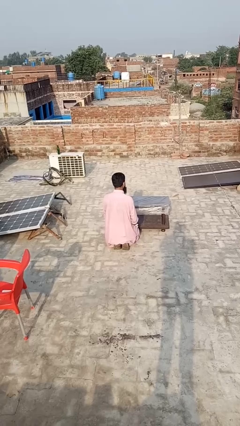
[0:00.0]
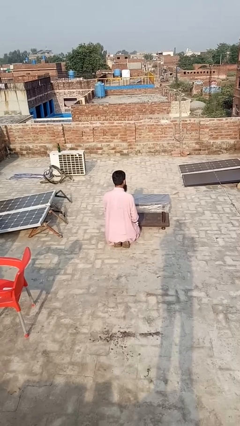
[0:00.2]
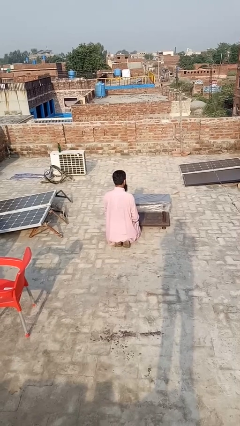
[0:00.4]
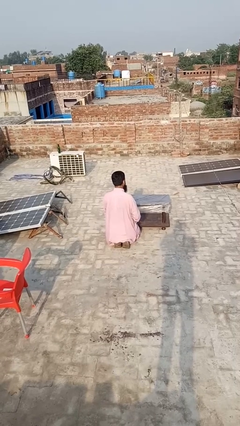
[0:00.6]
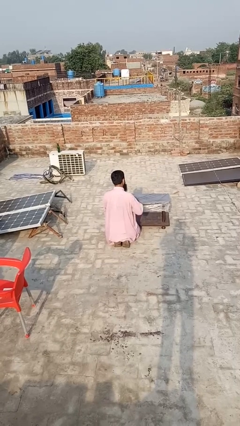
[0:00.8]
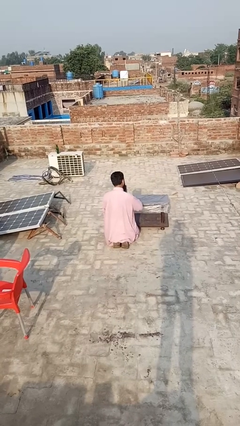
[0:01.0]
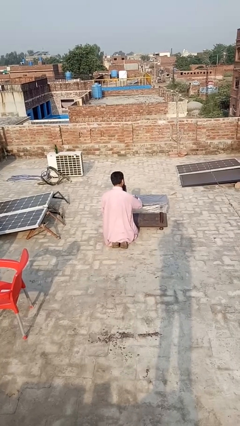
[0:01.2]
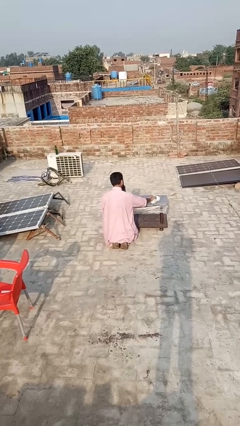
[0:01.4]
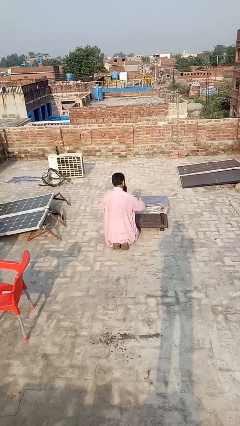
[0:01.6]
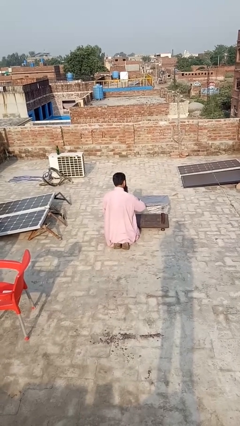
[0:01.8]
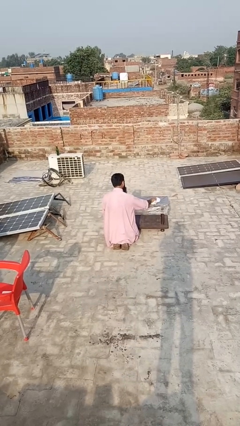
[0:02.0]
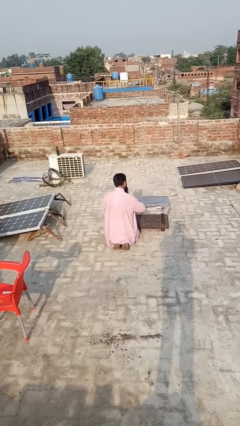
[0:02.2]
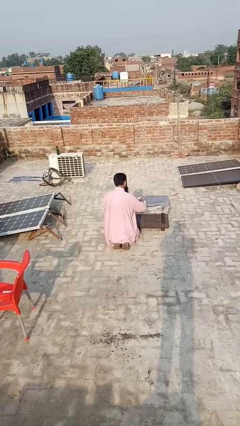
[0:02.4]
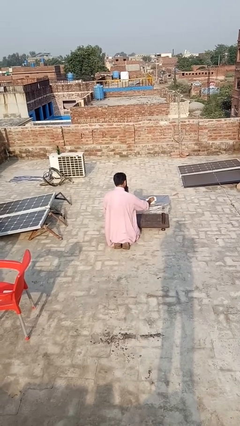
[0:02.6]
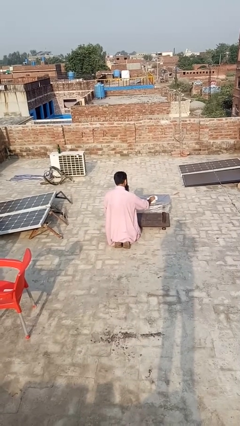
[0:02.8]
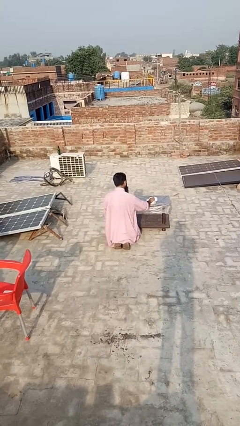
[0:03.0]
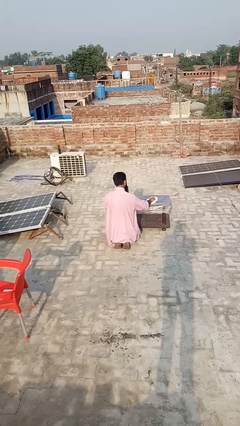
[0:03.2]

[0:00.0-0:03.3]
person cleans table with rag

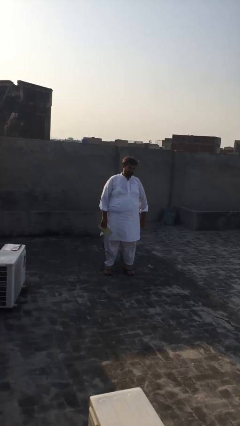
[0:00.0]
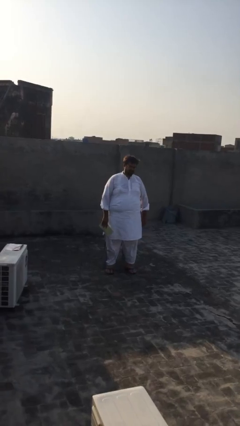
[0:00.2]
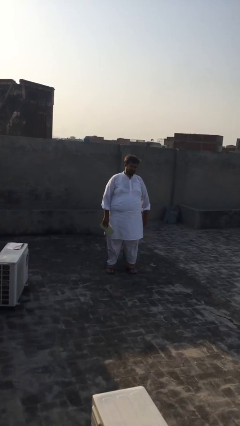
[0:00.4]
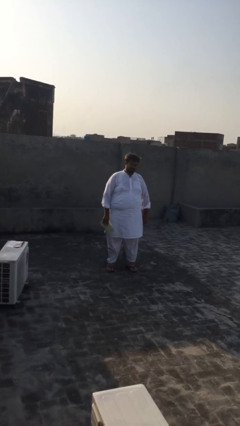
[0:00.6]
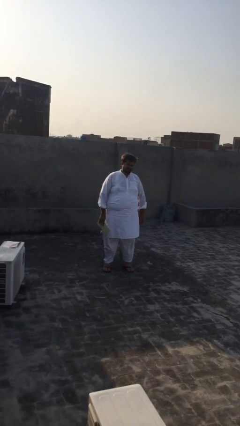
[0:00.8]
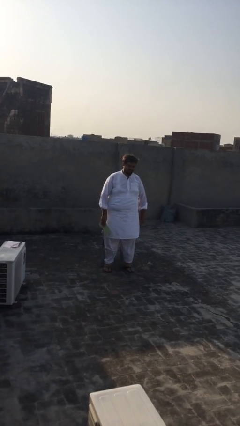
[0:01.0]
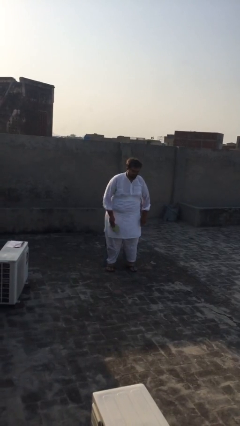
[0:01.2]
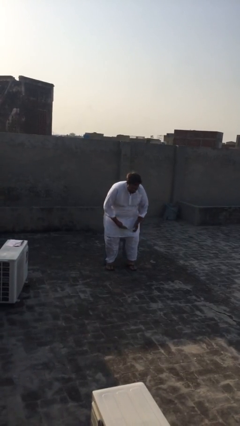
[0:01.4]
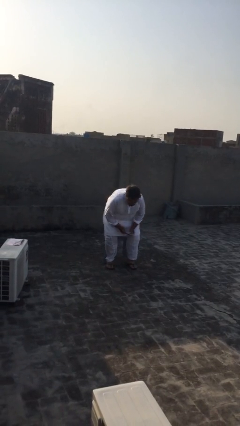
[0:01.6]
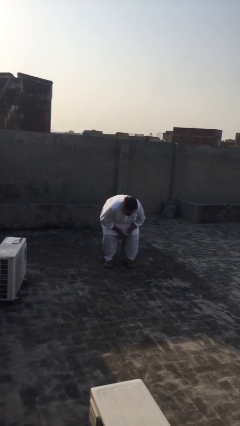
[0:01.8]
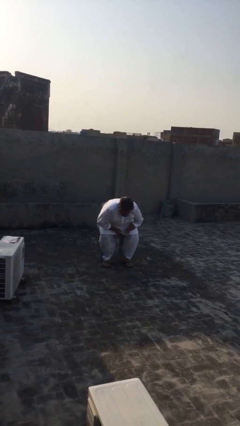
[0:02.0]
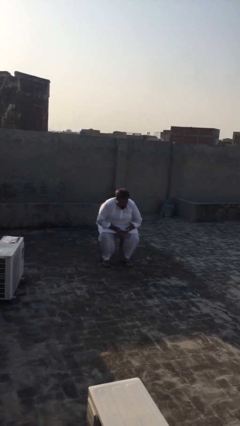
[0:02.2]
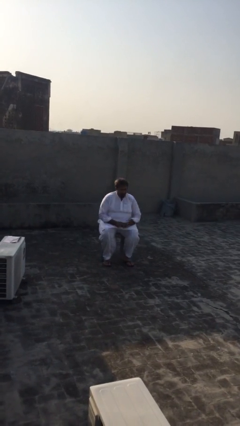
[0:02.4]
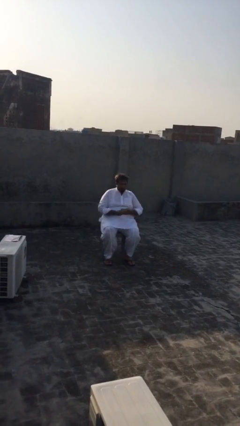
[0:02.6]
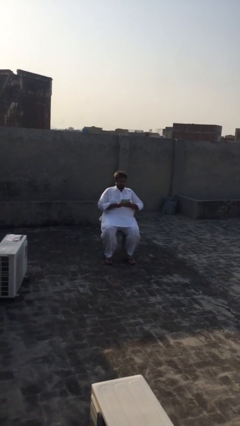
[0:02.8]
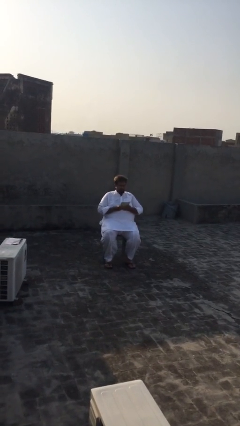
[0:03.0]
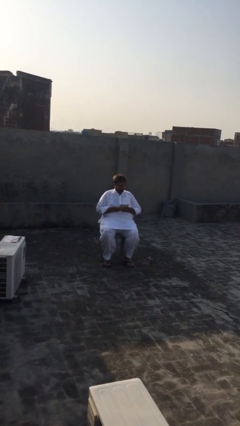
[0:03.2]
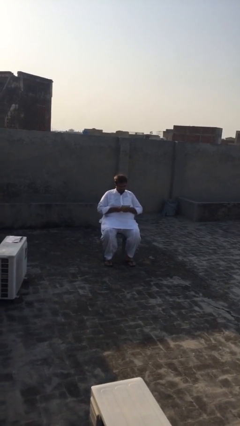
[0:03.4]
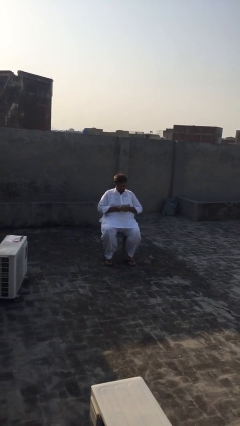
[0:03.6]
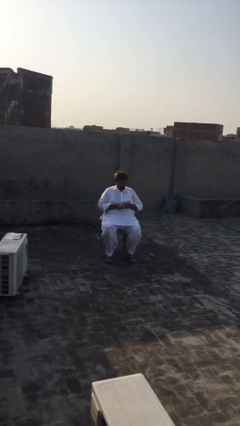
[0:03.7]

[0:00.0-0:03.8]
person sits down

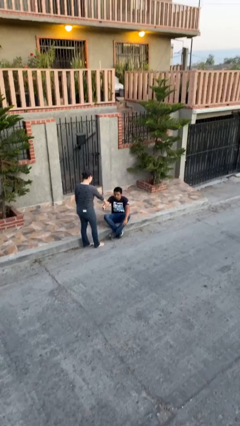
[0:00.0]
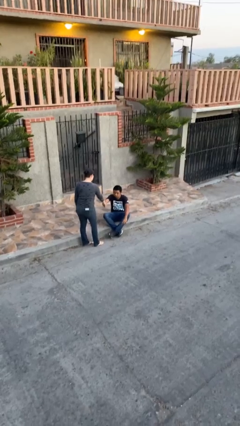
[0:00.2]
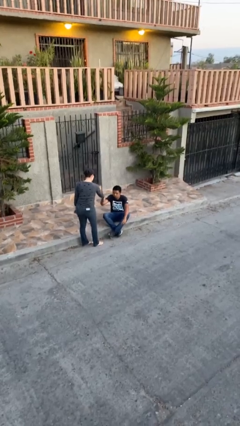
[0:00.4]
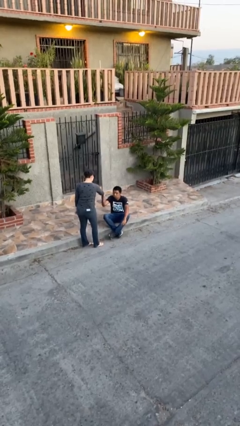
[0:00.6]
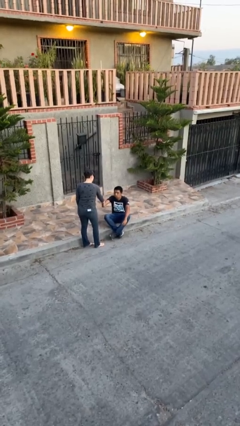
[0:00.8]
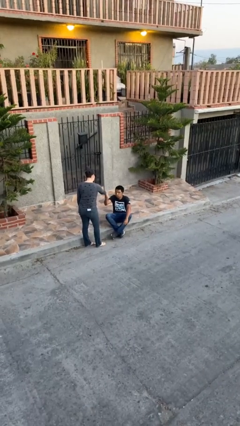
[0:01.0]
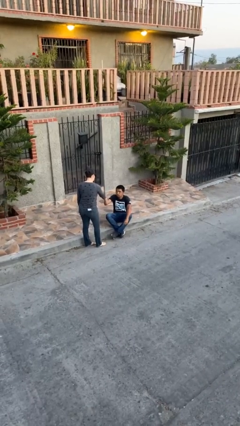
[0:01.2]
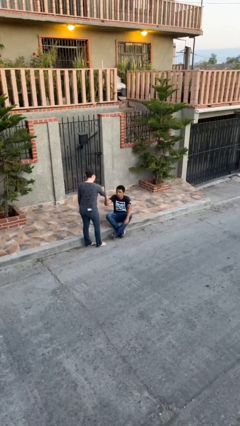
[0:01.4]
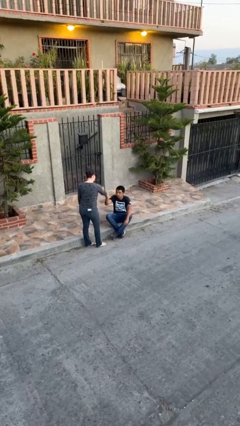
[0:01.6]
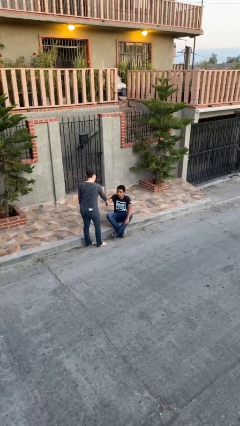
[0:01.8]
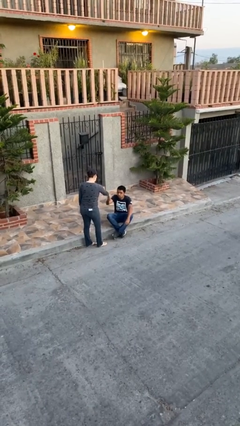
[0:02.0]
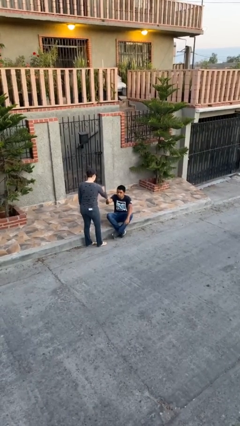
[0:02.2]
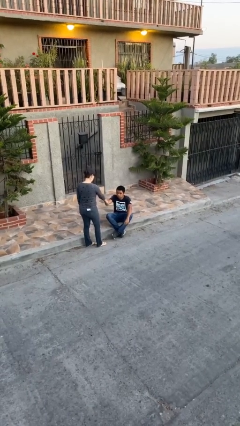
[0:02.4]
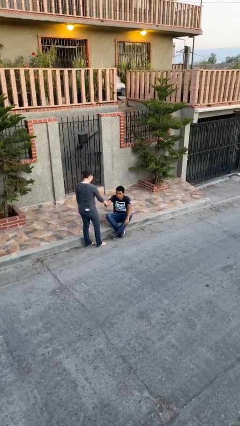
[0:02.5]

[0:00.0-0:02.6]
person shakes hand

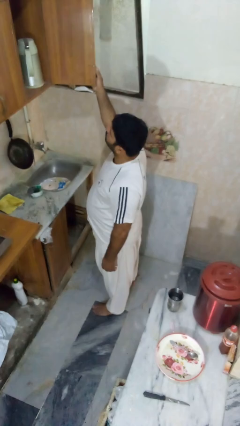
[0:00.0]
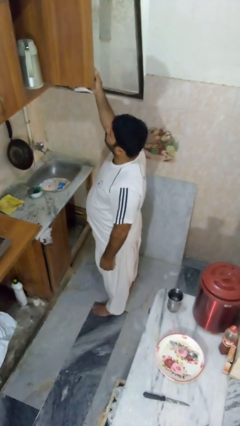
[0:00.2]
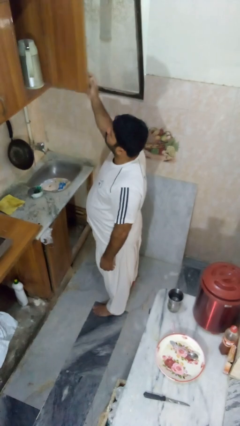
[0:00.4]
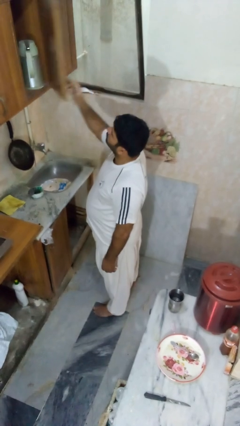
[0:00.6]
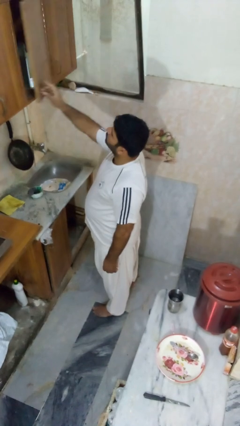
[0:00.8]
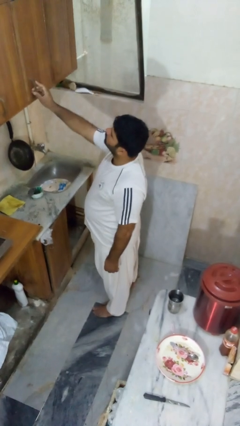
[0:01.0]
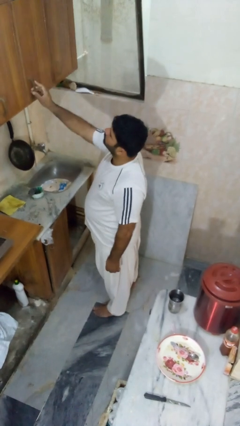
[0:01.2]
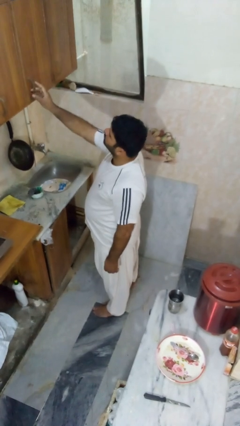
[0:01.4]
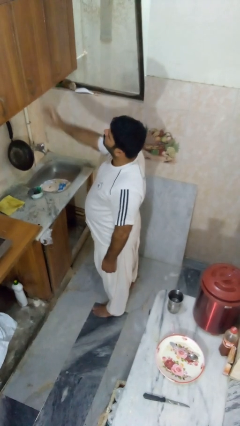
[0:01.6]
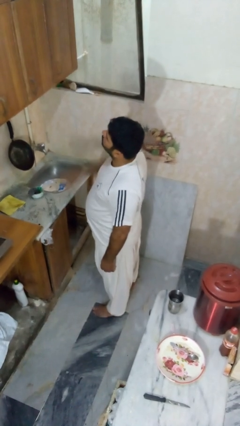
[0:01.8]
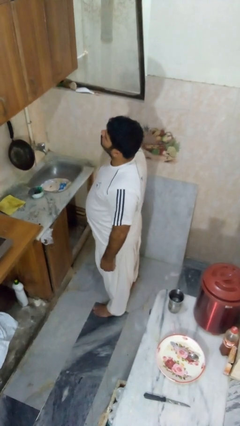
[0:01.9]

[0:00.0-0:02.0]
person closes cabinet

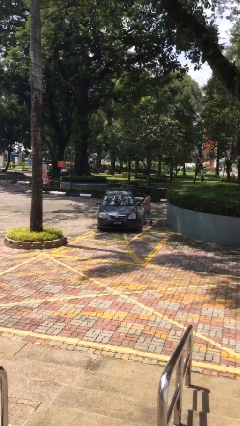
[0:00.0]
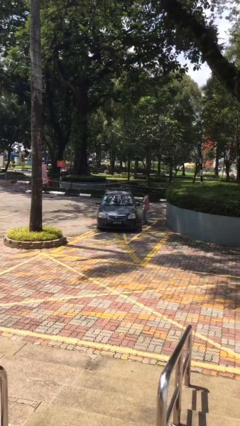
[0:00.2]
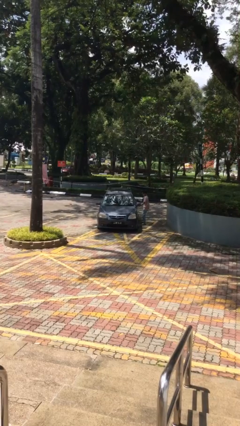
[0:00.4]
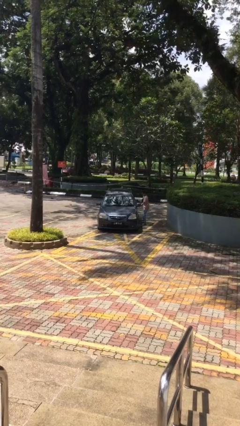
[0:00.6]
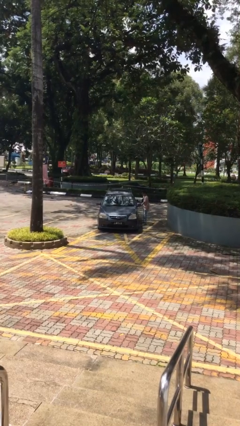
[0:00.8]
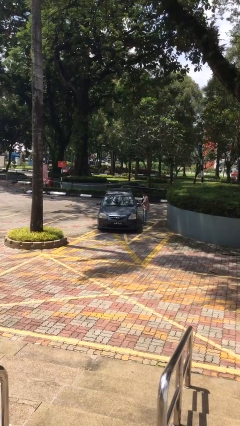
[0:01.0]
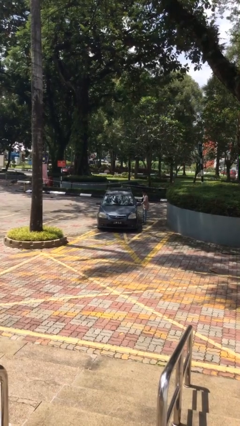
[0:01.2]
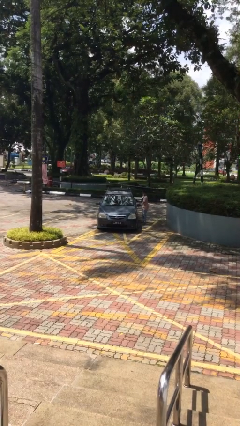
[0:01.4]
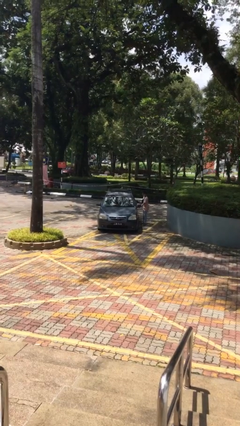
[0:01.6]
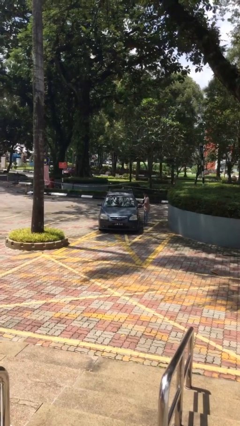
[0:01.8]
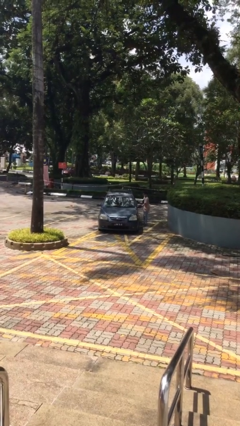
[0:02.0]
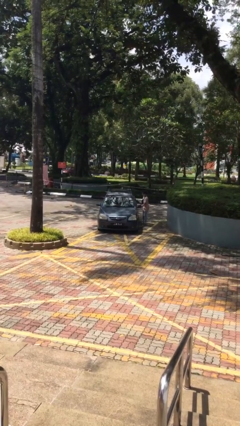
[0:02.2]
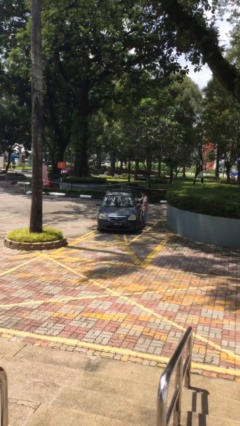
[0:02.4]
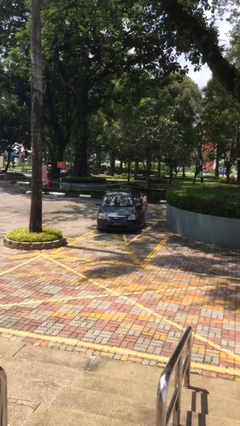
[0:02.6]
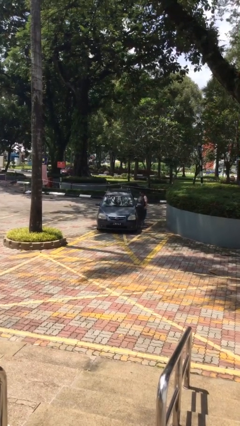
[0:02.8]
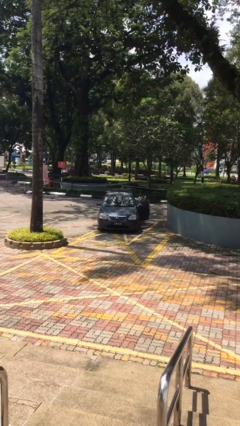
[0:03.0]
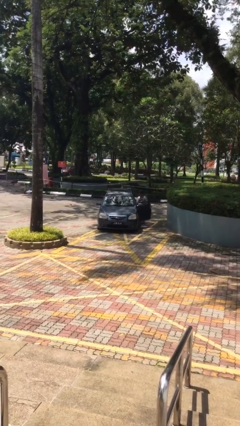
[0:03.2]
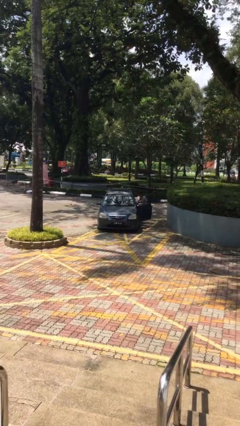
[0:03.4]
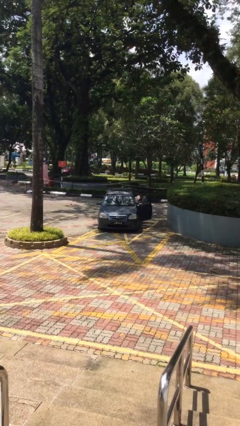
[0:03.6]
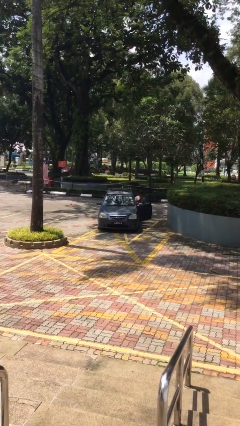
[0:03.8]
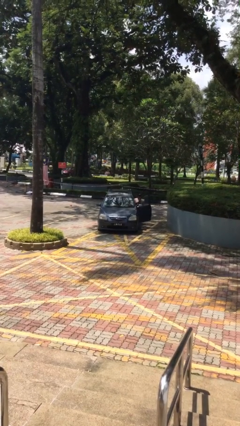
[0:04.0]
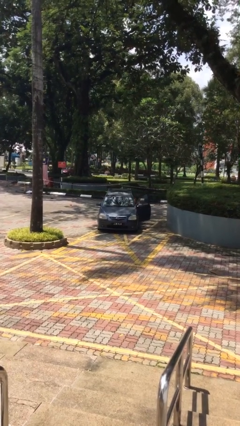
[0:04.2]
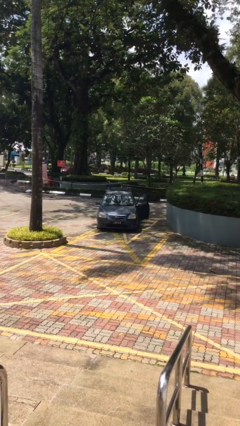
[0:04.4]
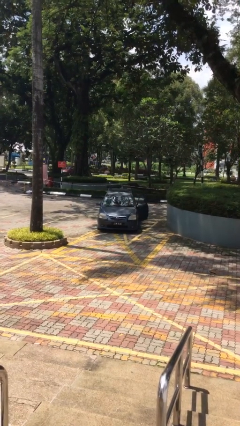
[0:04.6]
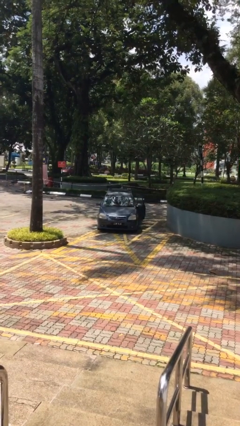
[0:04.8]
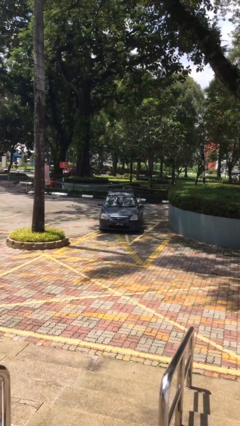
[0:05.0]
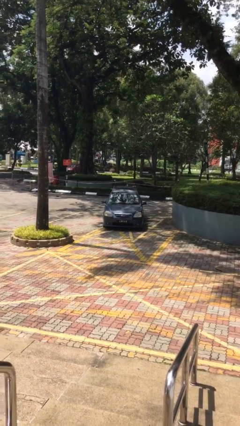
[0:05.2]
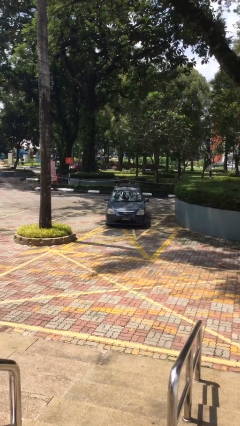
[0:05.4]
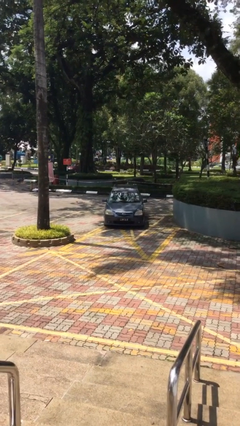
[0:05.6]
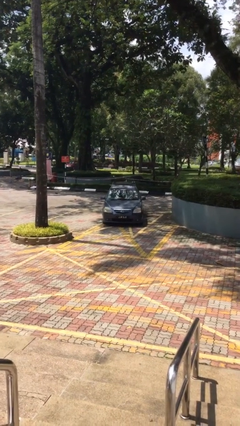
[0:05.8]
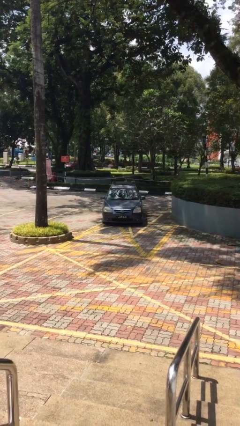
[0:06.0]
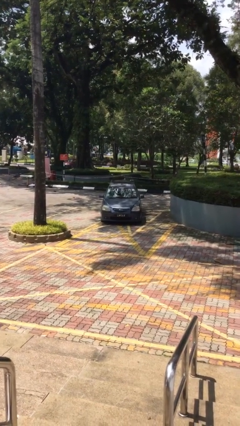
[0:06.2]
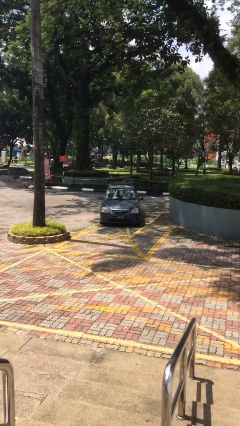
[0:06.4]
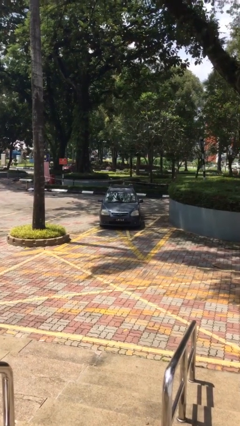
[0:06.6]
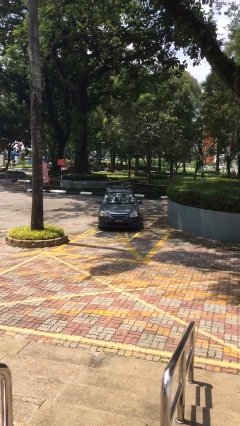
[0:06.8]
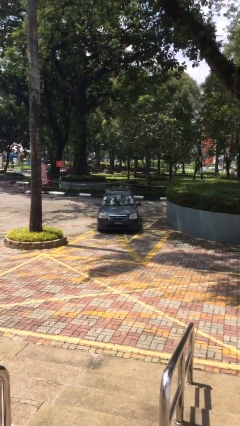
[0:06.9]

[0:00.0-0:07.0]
car picks up person
